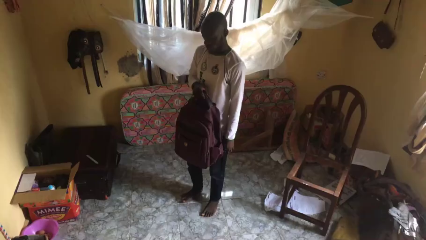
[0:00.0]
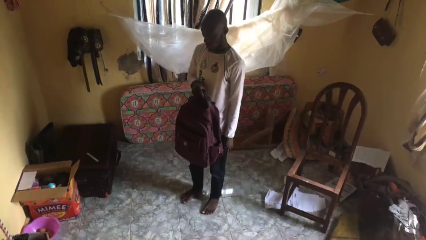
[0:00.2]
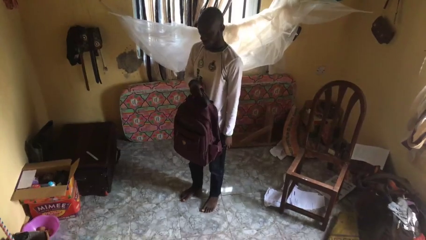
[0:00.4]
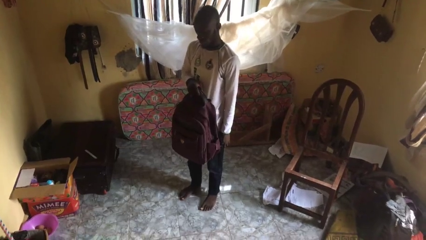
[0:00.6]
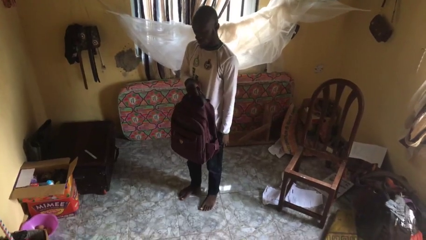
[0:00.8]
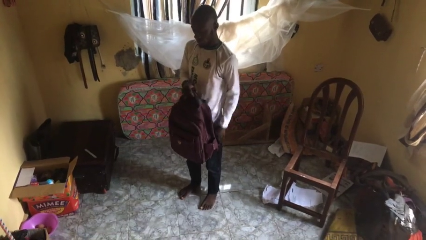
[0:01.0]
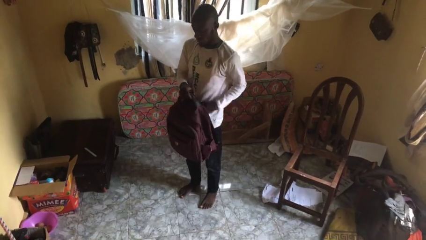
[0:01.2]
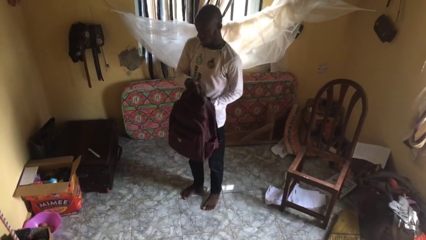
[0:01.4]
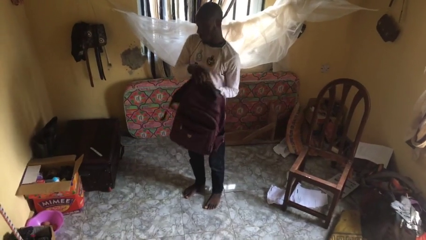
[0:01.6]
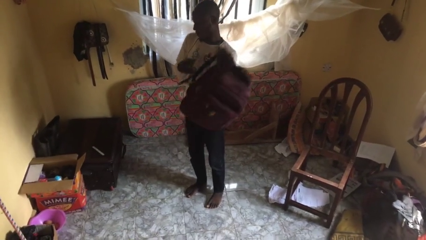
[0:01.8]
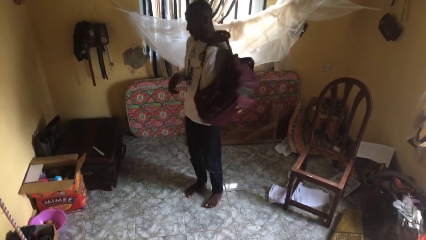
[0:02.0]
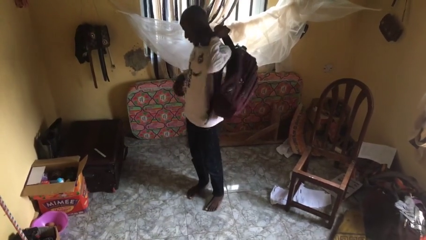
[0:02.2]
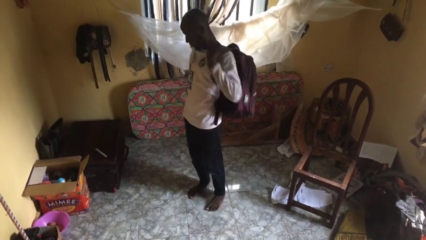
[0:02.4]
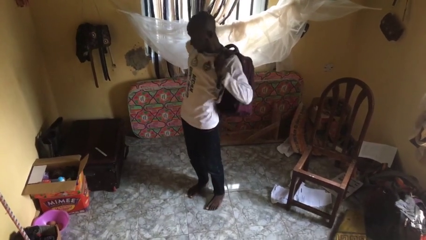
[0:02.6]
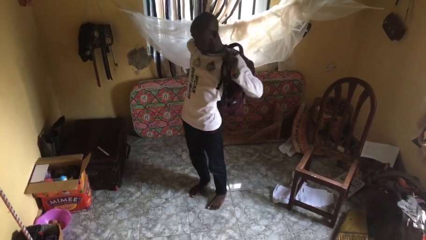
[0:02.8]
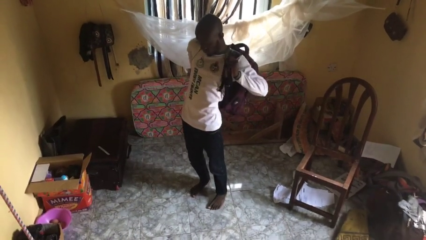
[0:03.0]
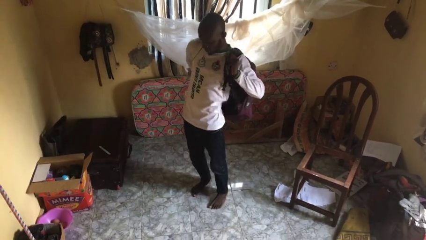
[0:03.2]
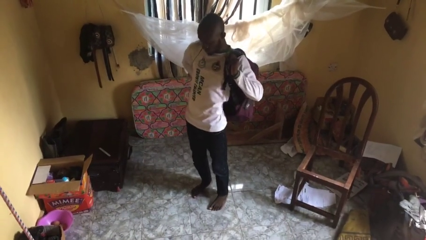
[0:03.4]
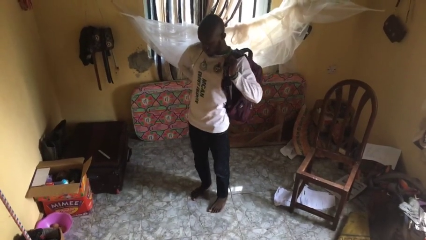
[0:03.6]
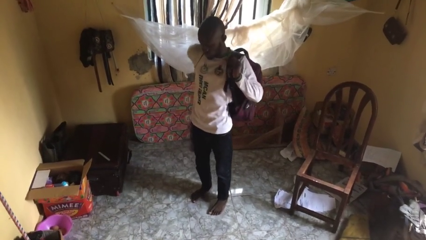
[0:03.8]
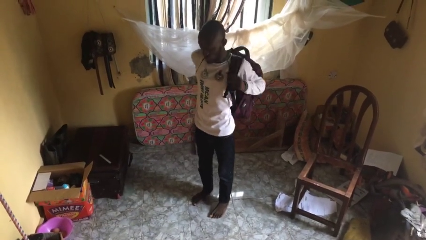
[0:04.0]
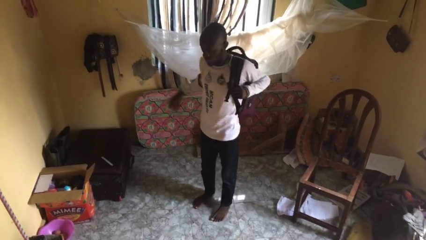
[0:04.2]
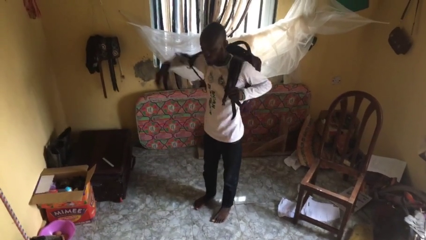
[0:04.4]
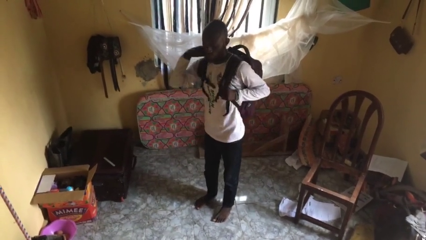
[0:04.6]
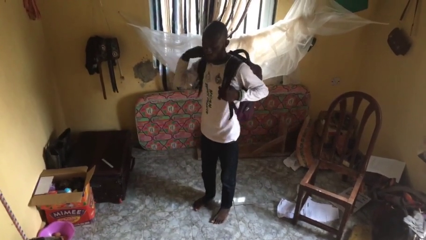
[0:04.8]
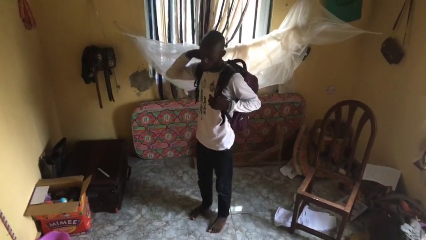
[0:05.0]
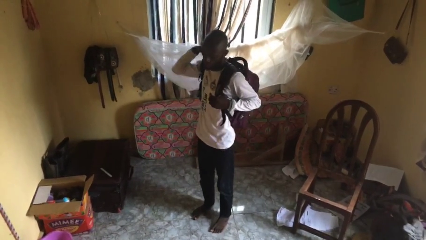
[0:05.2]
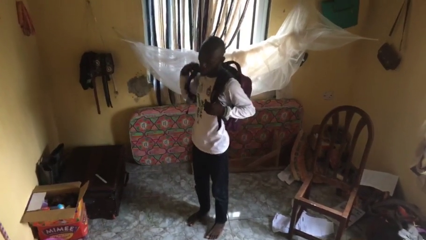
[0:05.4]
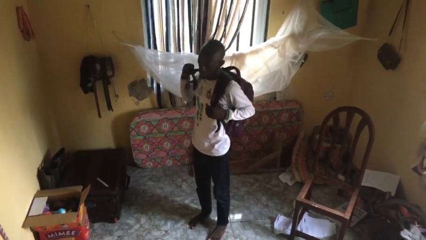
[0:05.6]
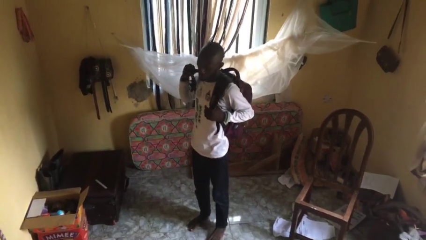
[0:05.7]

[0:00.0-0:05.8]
person puts on backpack

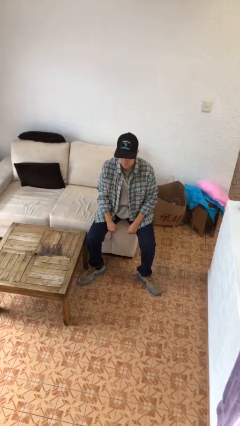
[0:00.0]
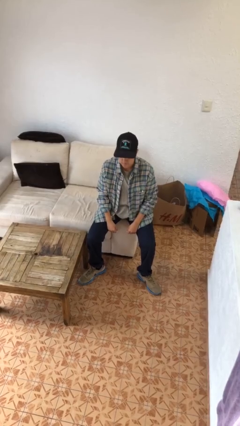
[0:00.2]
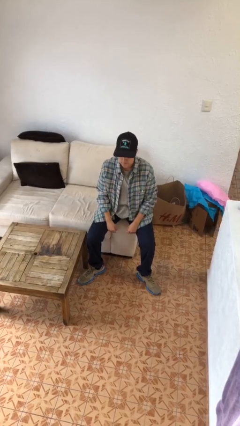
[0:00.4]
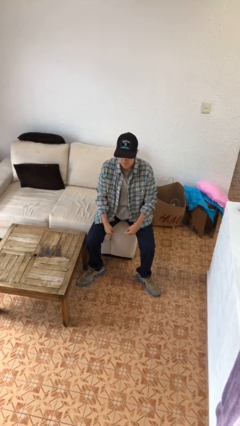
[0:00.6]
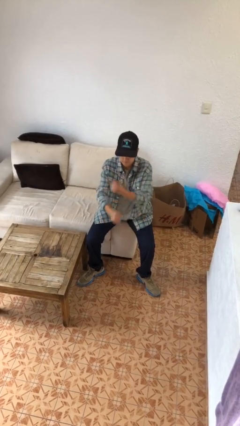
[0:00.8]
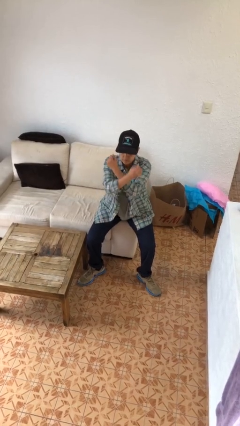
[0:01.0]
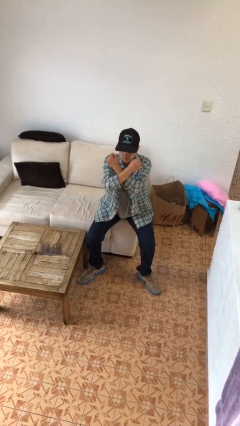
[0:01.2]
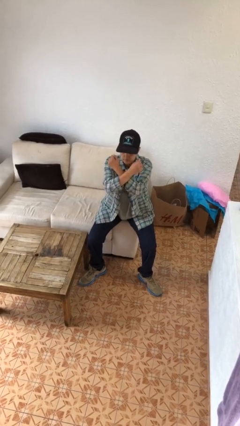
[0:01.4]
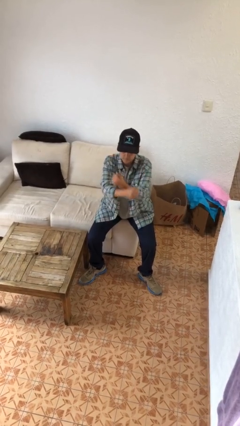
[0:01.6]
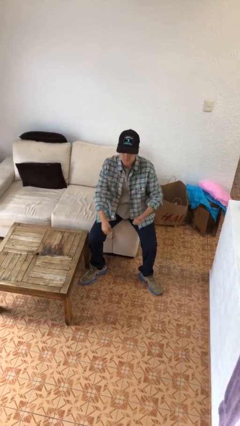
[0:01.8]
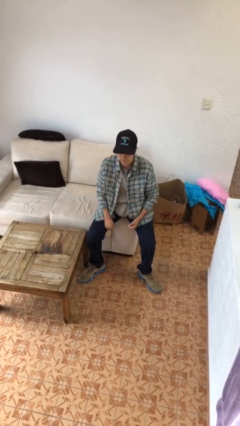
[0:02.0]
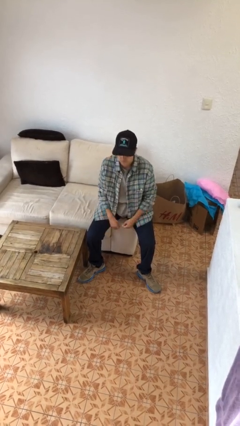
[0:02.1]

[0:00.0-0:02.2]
person gestures arms x

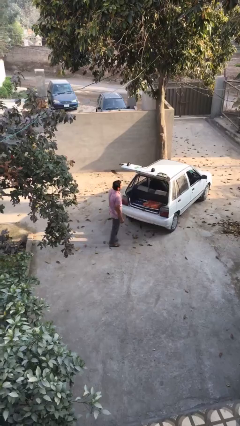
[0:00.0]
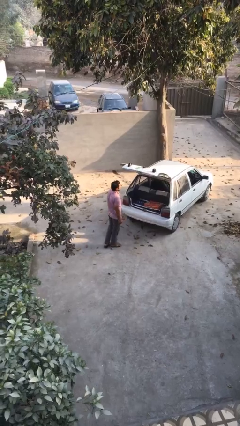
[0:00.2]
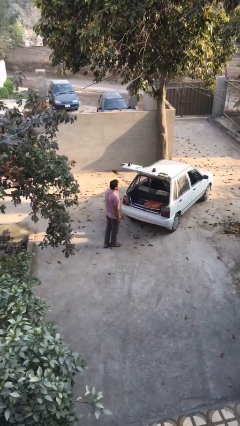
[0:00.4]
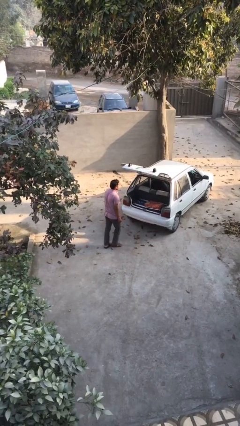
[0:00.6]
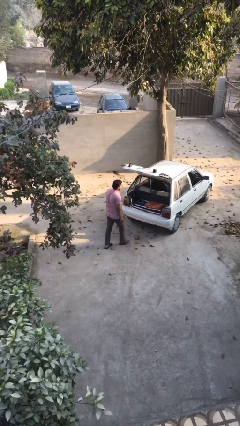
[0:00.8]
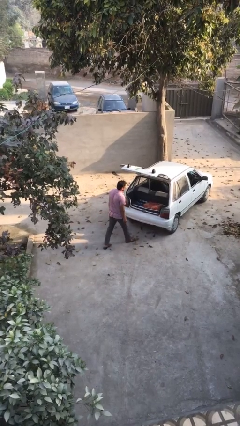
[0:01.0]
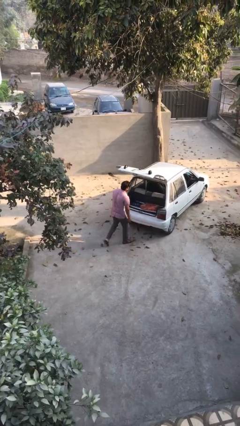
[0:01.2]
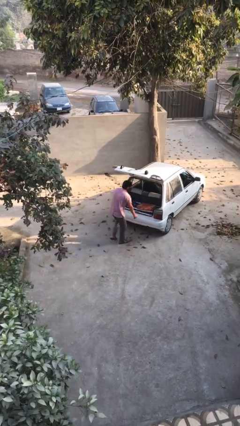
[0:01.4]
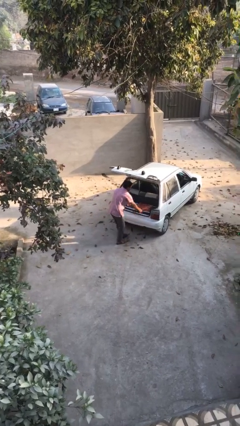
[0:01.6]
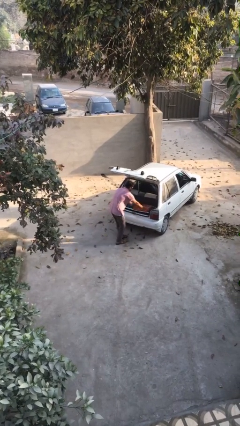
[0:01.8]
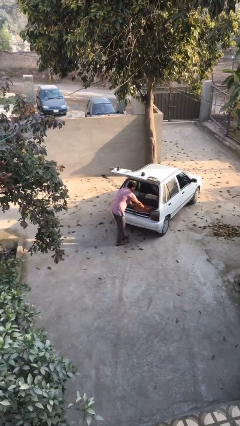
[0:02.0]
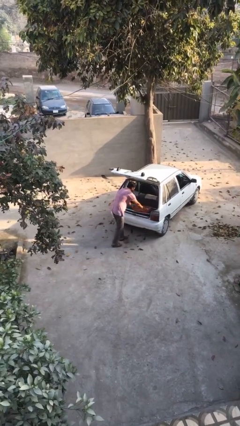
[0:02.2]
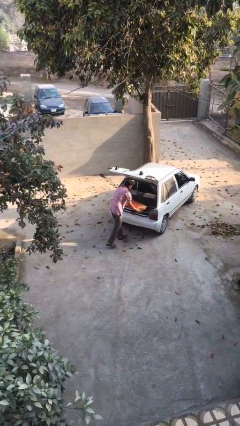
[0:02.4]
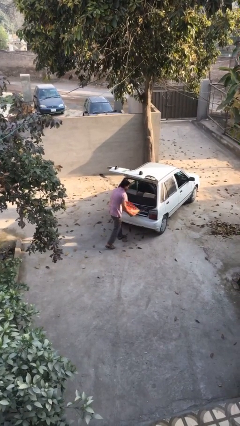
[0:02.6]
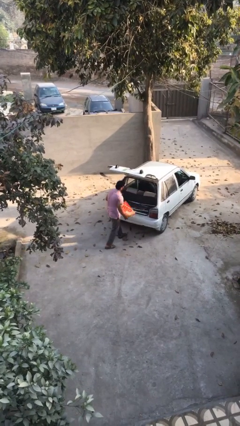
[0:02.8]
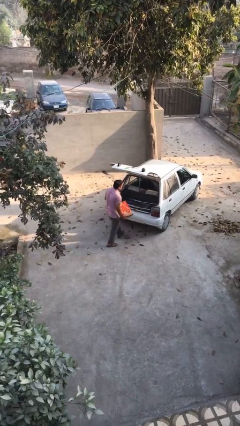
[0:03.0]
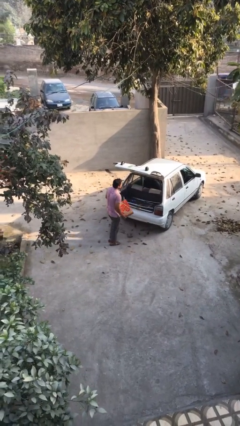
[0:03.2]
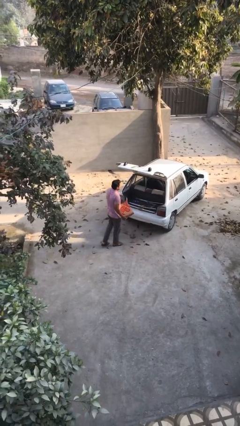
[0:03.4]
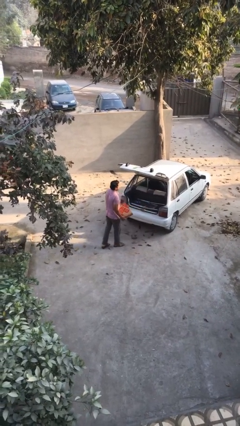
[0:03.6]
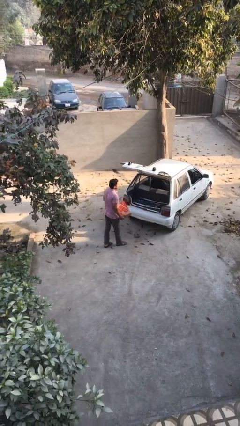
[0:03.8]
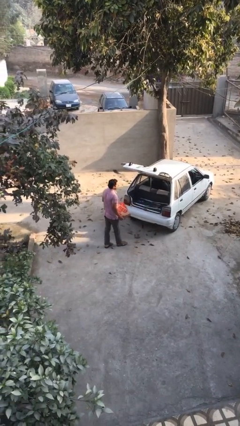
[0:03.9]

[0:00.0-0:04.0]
person unloads car

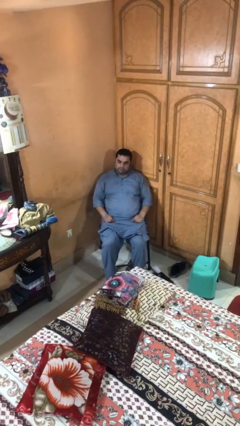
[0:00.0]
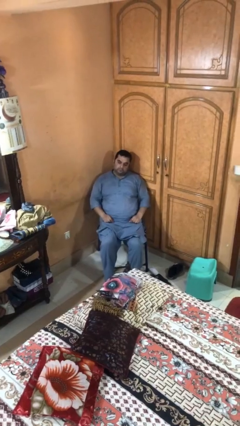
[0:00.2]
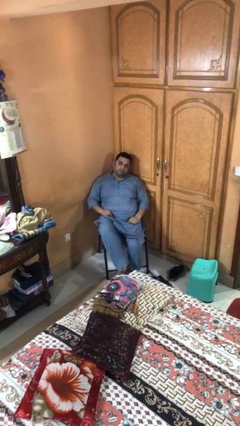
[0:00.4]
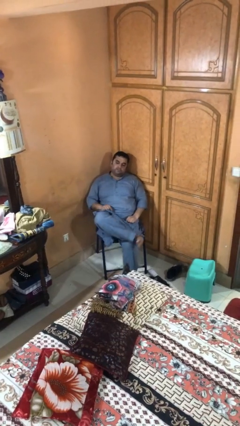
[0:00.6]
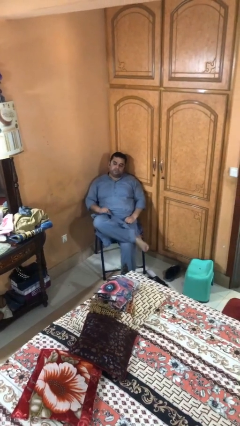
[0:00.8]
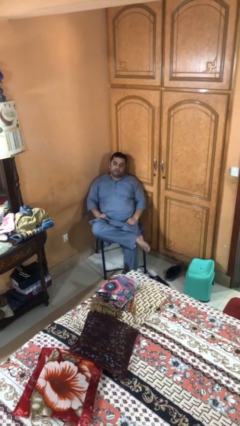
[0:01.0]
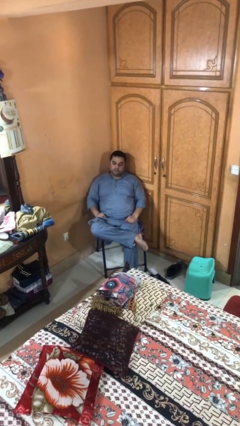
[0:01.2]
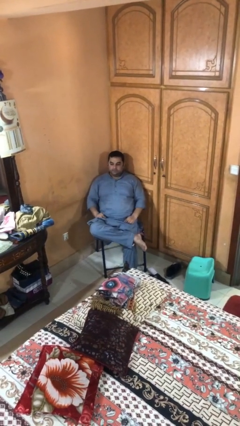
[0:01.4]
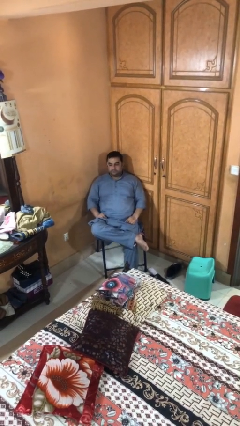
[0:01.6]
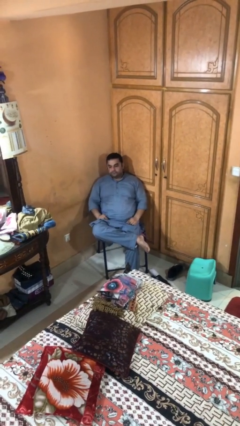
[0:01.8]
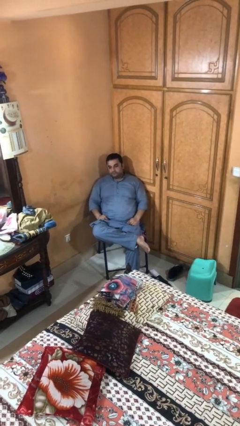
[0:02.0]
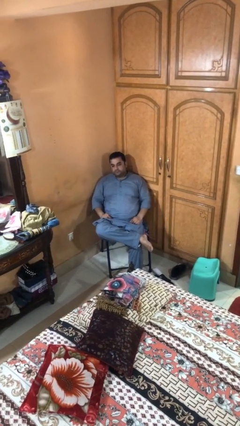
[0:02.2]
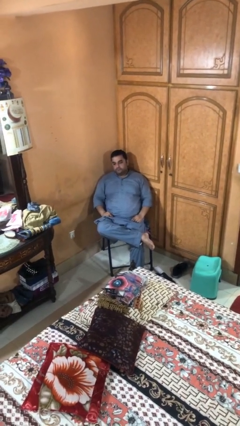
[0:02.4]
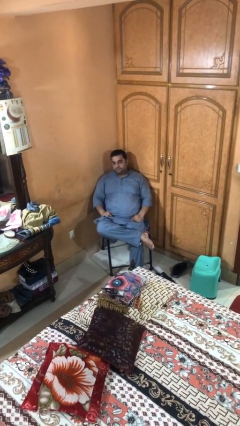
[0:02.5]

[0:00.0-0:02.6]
person crosses legs

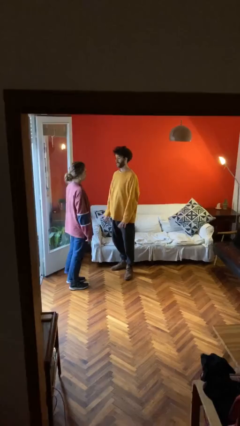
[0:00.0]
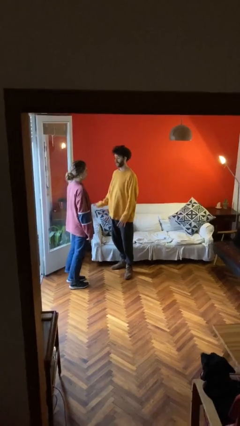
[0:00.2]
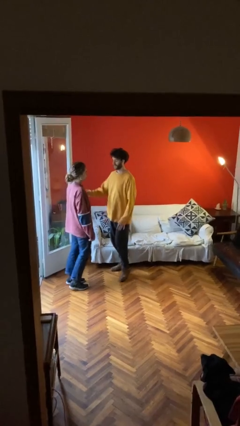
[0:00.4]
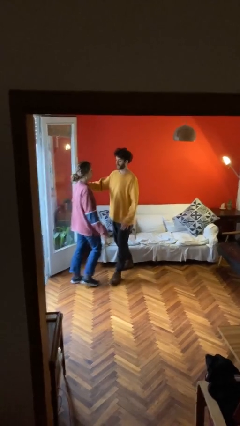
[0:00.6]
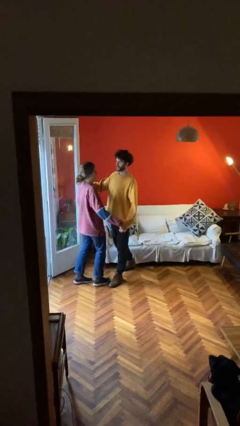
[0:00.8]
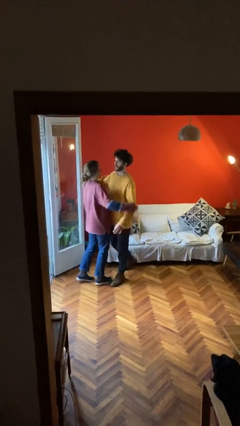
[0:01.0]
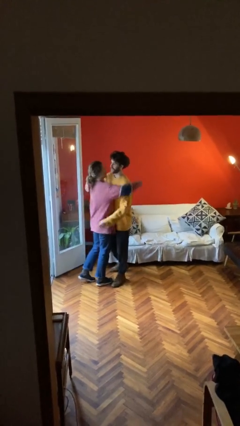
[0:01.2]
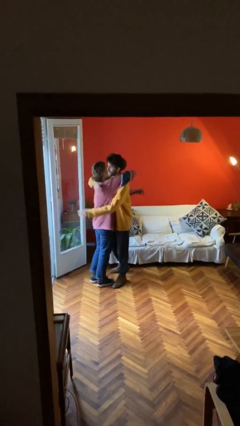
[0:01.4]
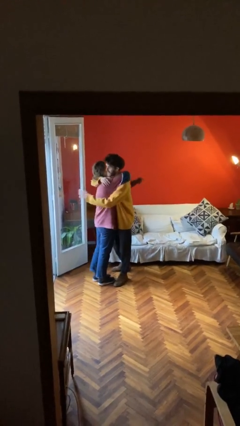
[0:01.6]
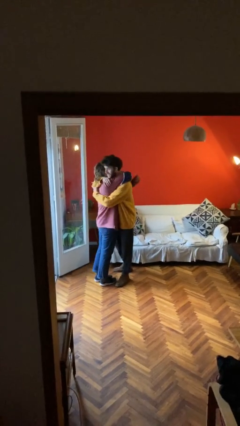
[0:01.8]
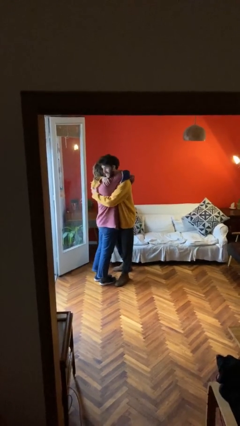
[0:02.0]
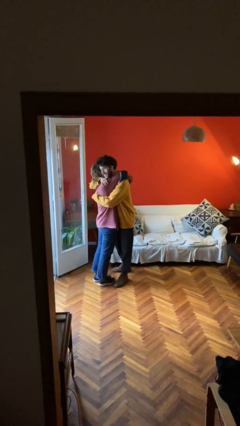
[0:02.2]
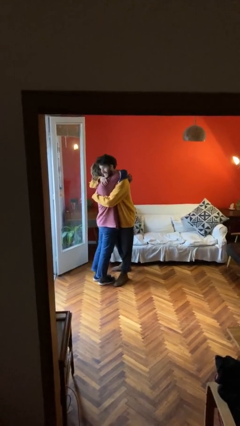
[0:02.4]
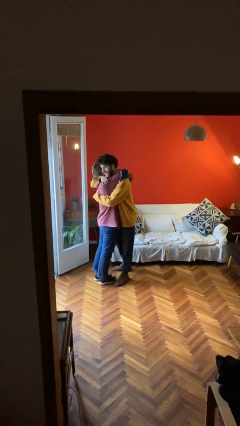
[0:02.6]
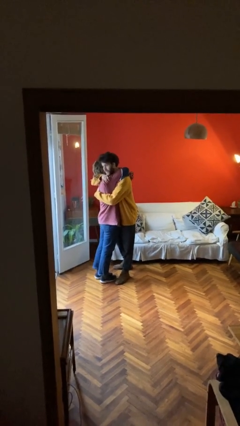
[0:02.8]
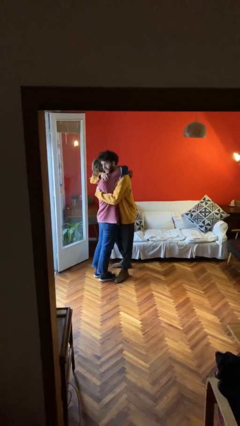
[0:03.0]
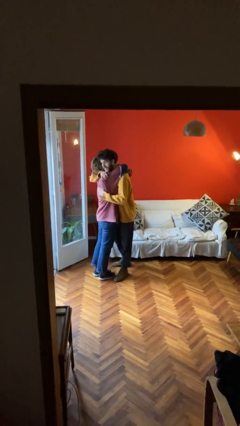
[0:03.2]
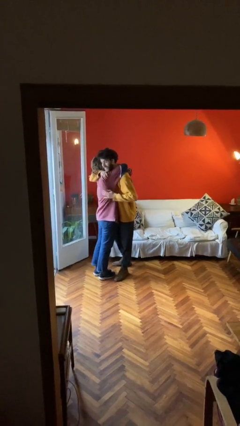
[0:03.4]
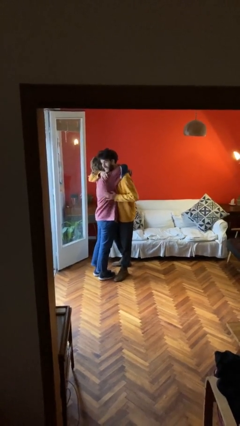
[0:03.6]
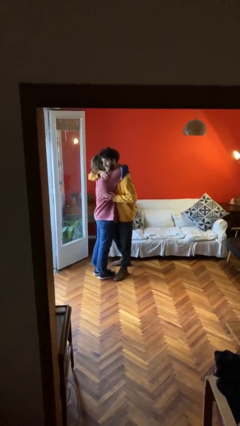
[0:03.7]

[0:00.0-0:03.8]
person embraces person
